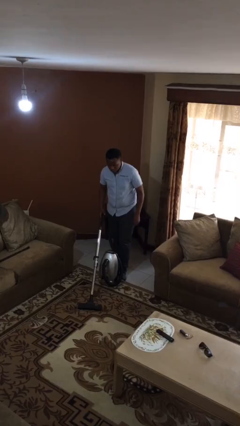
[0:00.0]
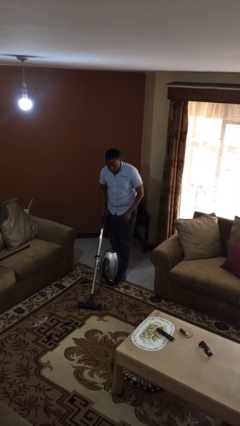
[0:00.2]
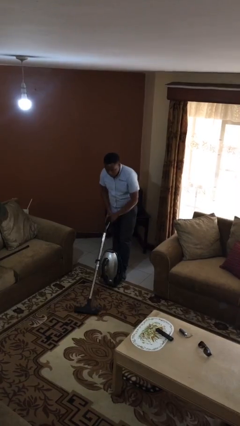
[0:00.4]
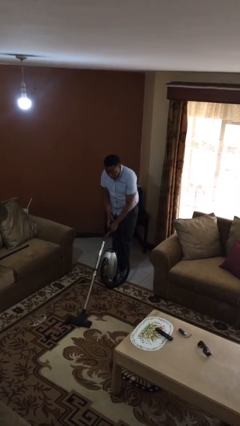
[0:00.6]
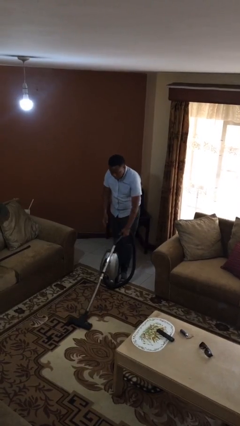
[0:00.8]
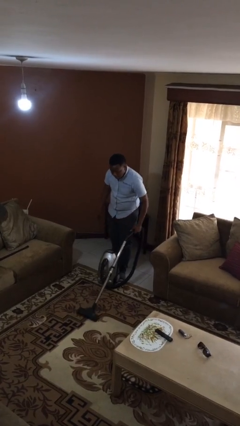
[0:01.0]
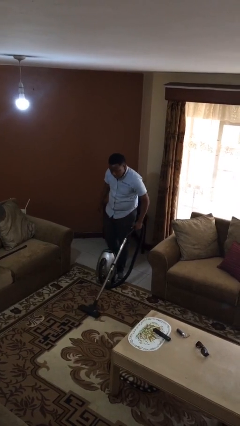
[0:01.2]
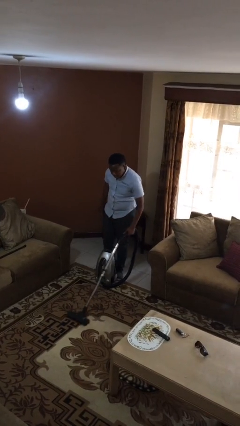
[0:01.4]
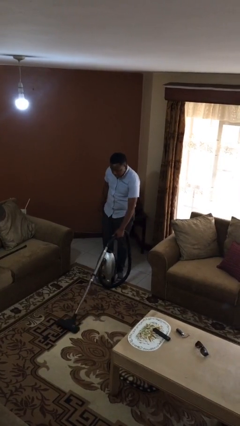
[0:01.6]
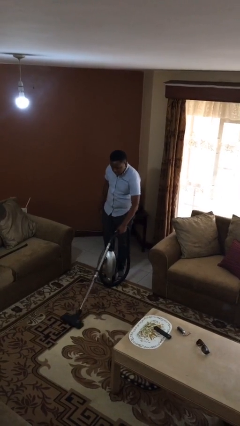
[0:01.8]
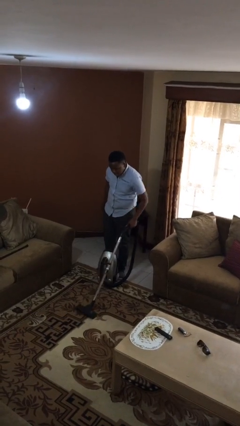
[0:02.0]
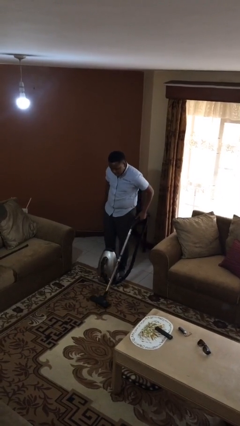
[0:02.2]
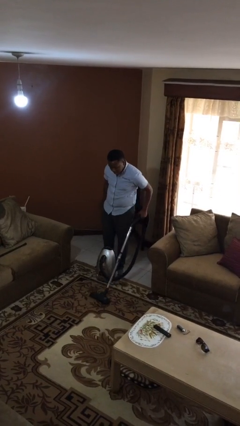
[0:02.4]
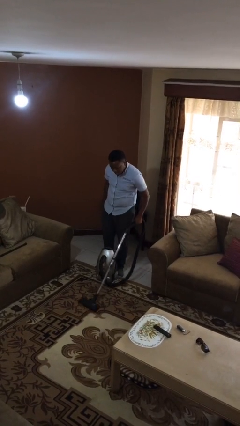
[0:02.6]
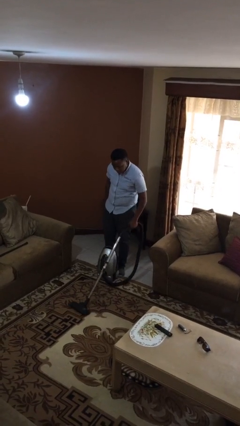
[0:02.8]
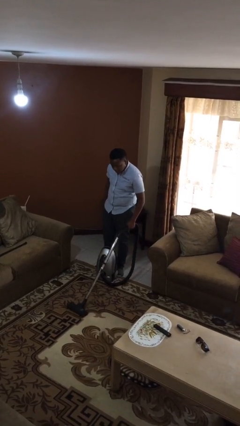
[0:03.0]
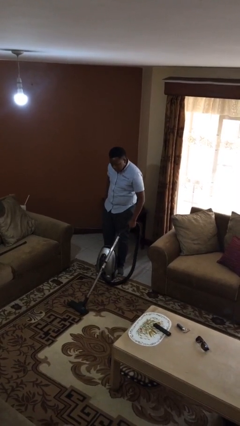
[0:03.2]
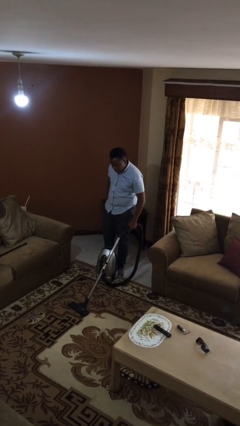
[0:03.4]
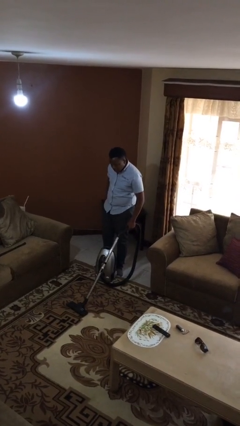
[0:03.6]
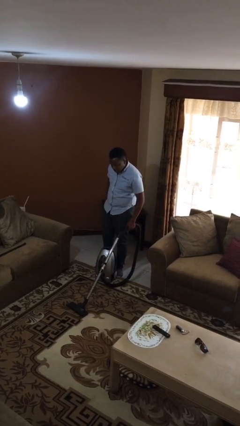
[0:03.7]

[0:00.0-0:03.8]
person vacuums carpet

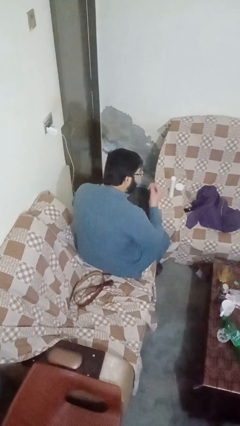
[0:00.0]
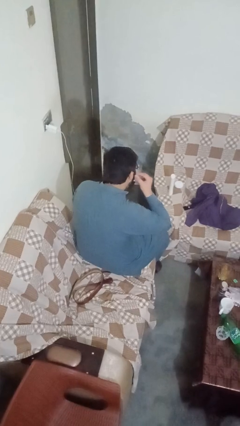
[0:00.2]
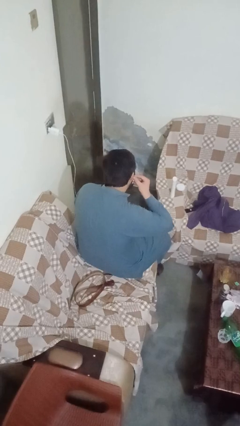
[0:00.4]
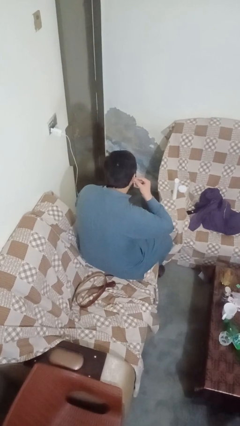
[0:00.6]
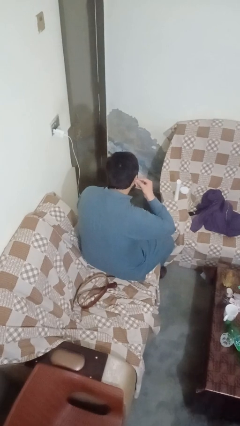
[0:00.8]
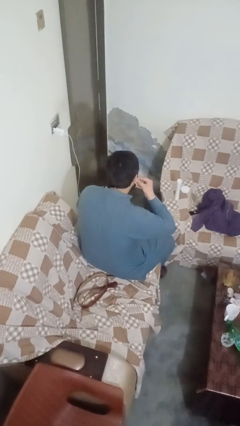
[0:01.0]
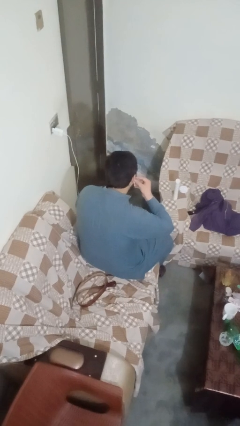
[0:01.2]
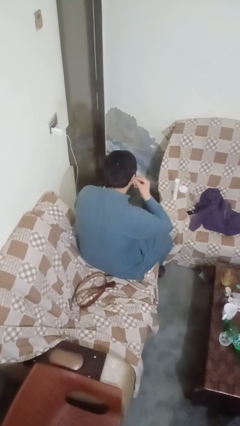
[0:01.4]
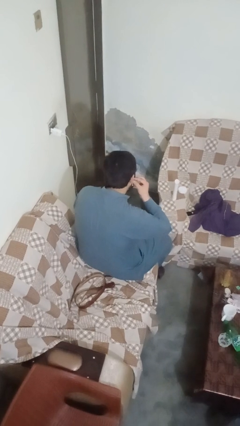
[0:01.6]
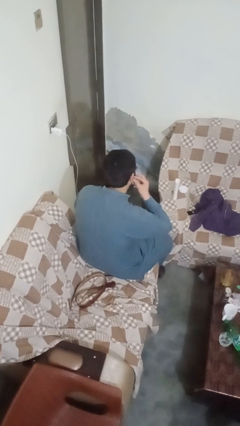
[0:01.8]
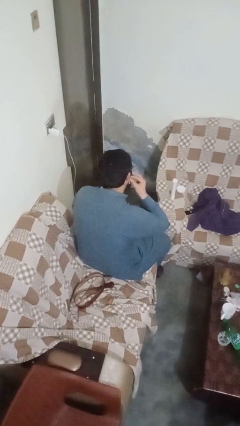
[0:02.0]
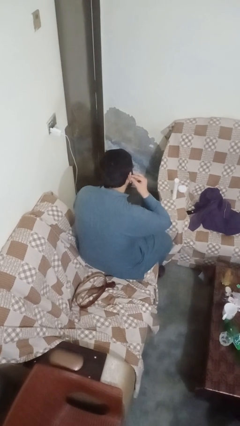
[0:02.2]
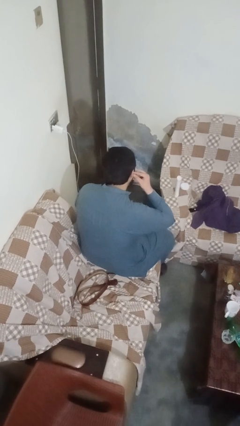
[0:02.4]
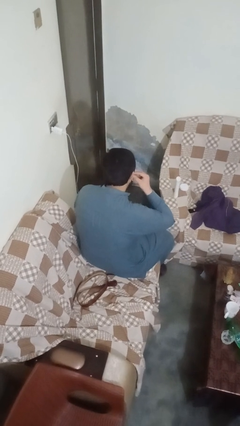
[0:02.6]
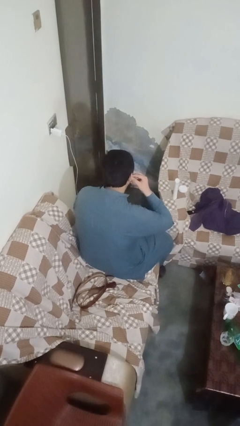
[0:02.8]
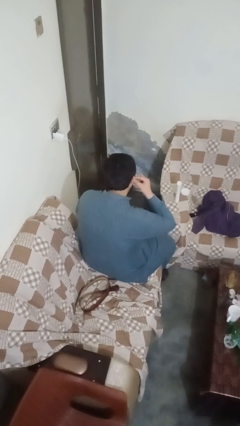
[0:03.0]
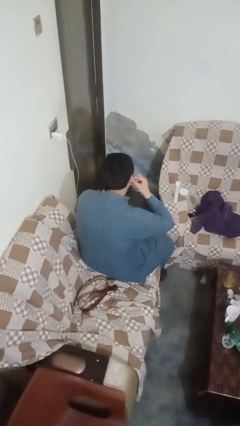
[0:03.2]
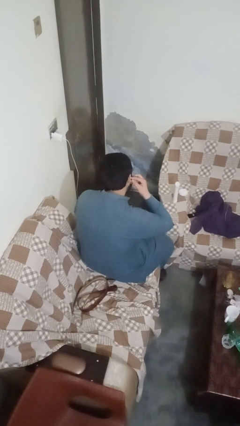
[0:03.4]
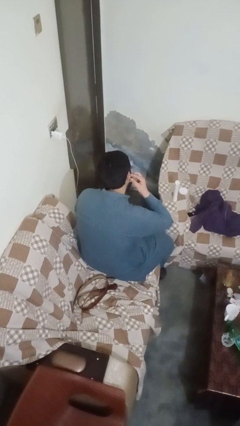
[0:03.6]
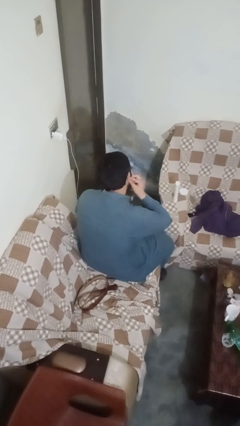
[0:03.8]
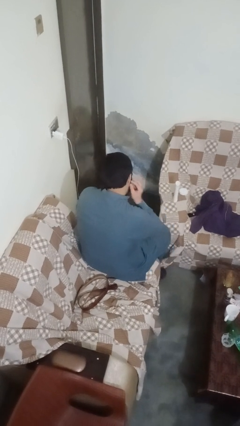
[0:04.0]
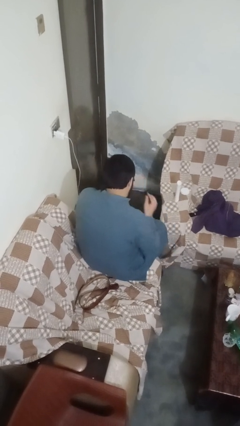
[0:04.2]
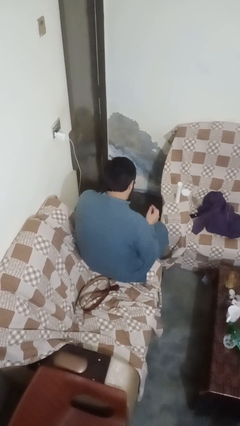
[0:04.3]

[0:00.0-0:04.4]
person puts on earrings

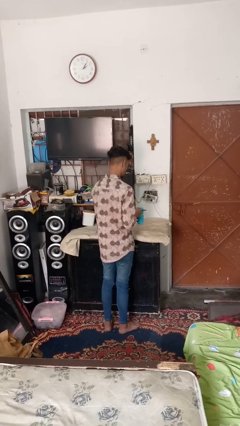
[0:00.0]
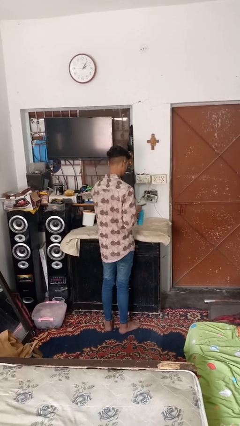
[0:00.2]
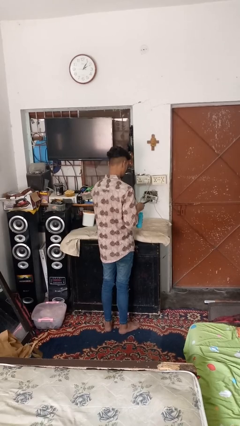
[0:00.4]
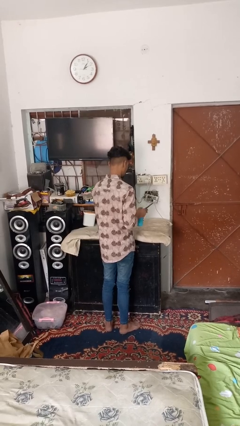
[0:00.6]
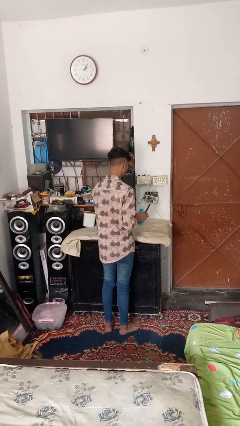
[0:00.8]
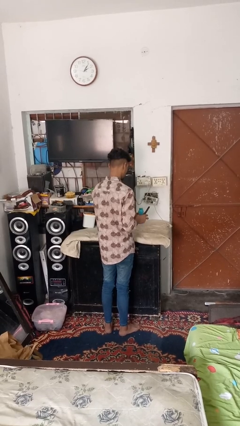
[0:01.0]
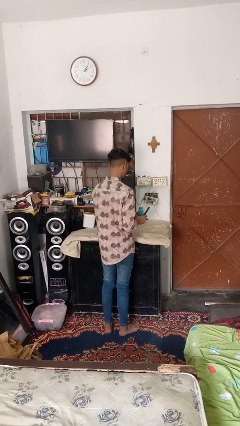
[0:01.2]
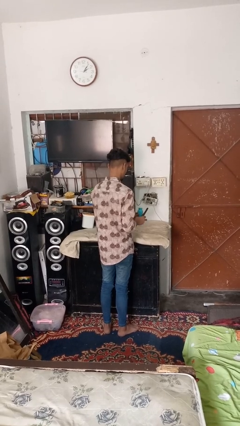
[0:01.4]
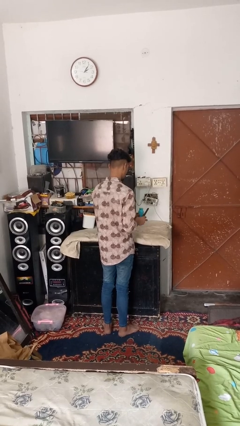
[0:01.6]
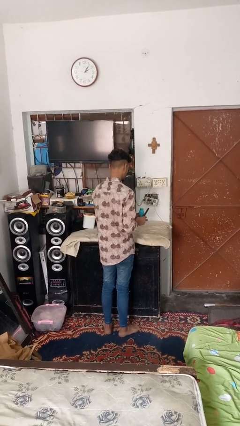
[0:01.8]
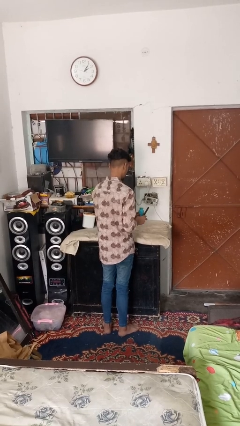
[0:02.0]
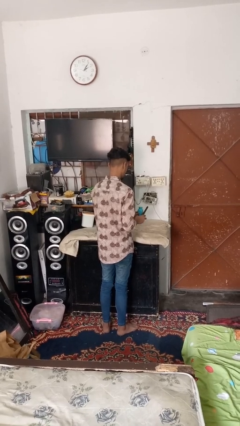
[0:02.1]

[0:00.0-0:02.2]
person opens can with can opener

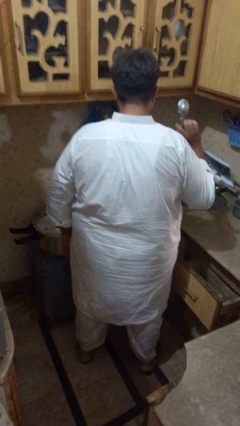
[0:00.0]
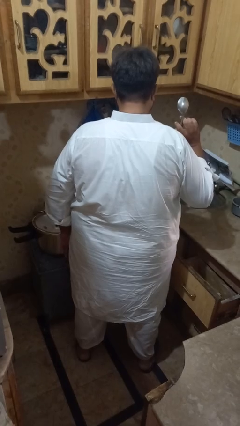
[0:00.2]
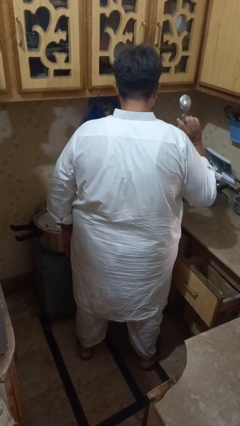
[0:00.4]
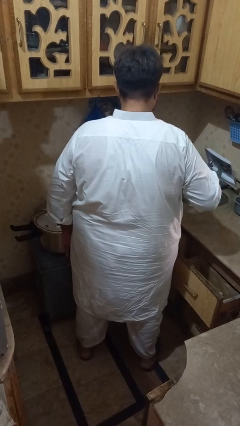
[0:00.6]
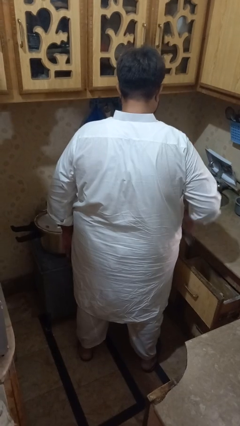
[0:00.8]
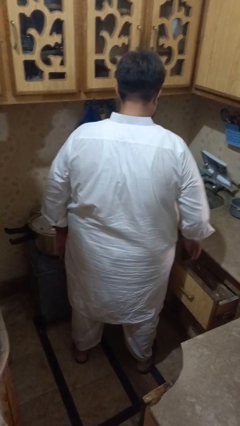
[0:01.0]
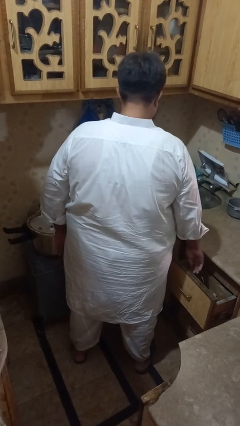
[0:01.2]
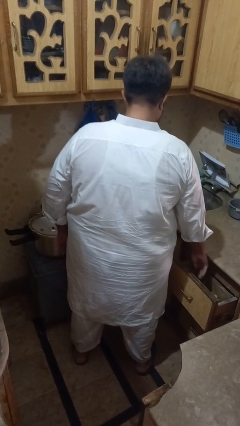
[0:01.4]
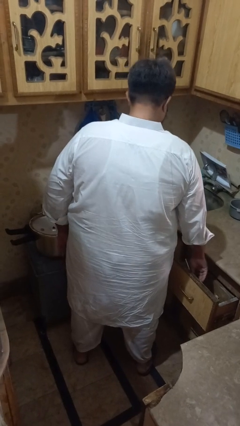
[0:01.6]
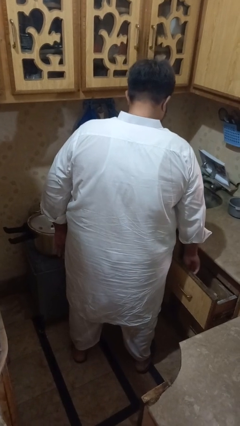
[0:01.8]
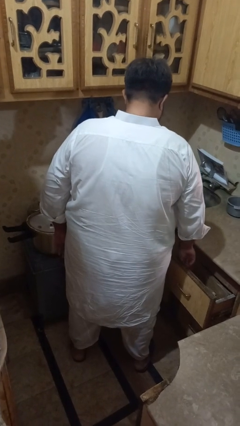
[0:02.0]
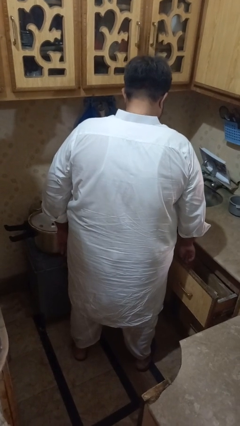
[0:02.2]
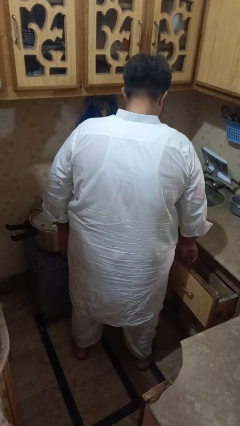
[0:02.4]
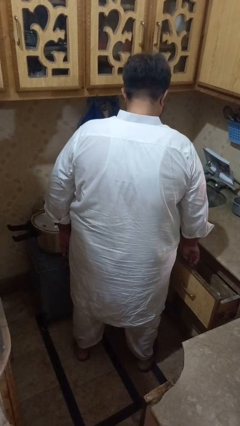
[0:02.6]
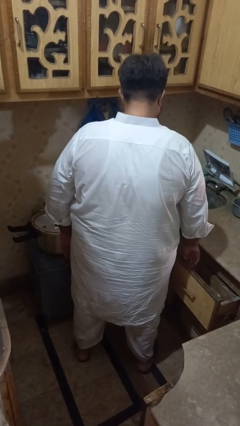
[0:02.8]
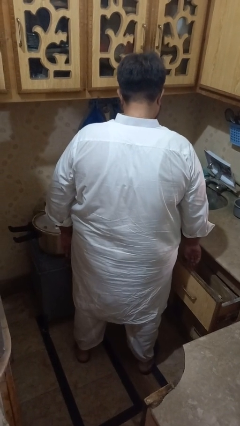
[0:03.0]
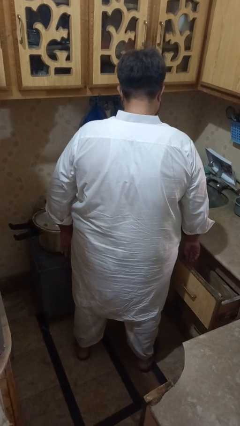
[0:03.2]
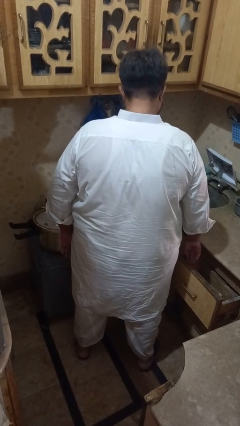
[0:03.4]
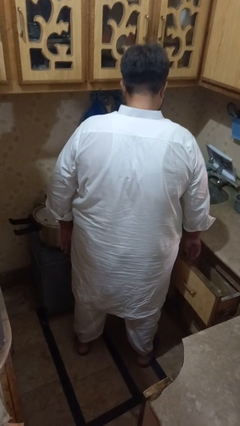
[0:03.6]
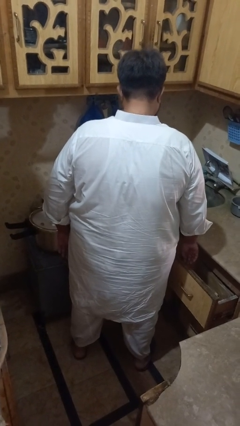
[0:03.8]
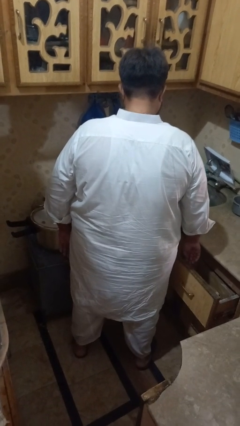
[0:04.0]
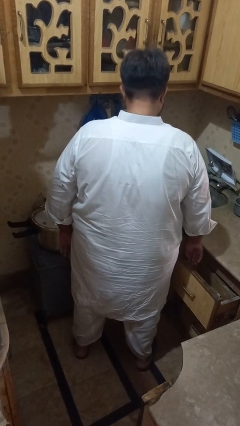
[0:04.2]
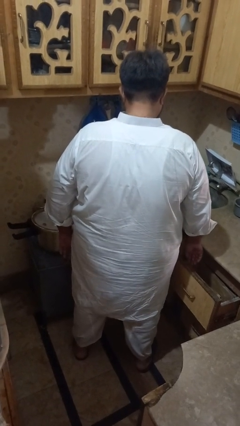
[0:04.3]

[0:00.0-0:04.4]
person puts object into kitchen drawer

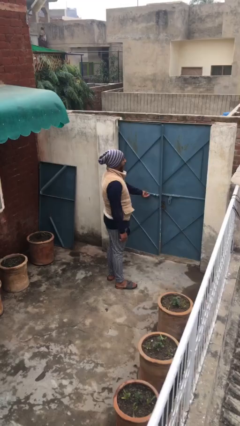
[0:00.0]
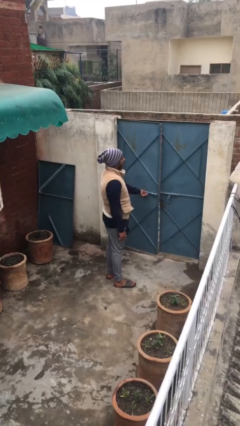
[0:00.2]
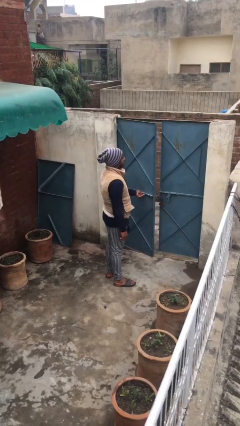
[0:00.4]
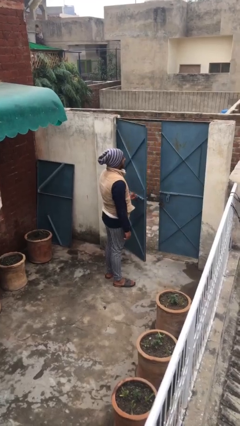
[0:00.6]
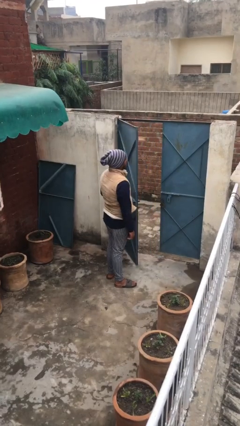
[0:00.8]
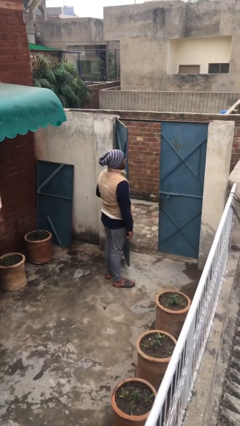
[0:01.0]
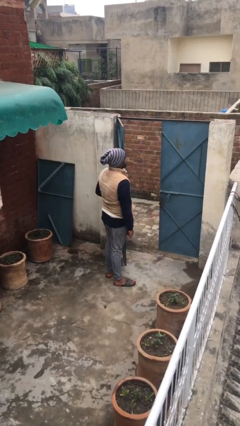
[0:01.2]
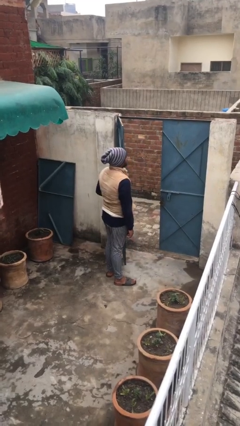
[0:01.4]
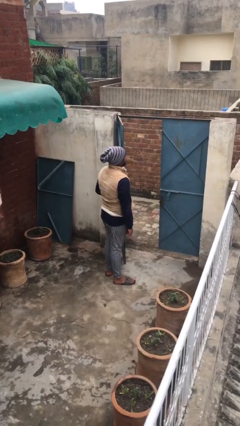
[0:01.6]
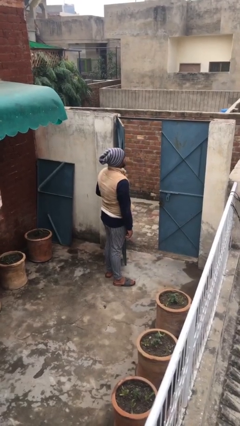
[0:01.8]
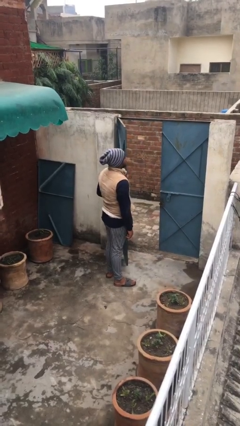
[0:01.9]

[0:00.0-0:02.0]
person opens facility door

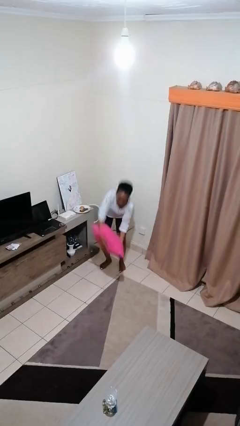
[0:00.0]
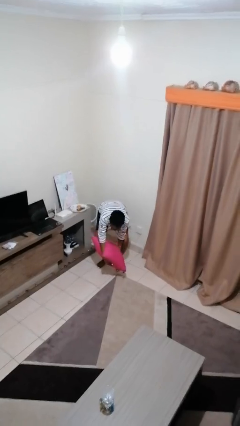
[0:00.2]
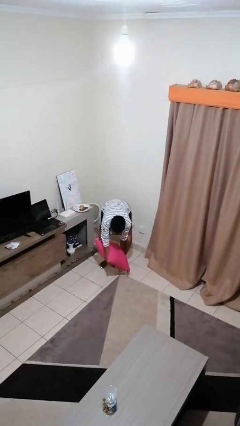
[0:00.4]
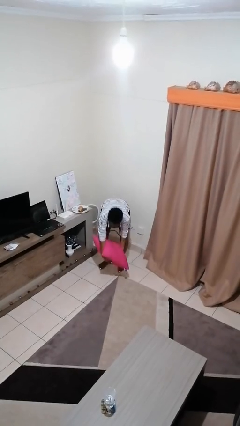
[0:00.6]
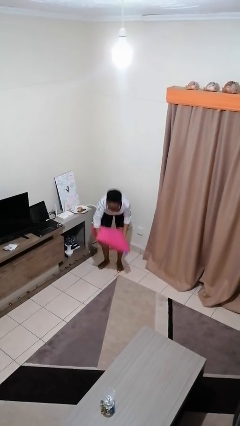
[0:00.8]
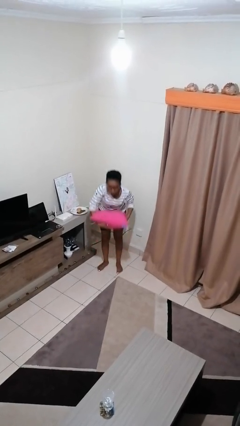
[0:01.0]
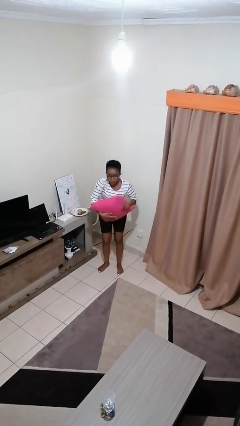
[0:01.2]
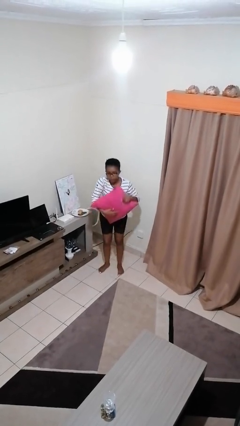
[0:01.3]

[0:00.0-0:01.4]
person catches dropped object
